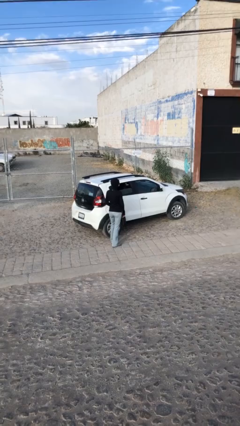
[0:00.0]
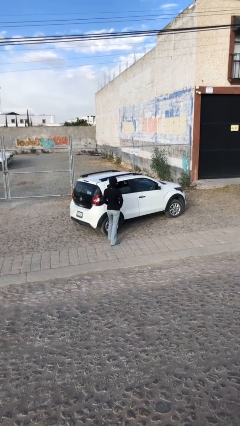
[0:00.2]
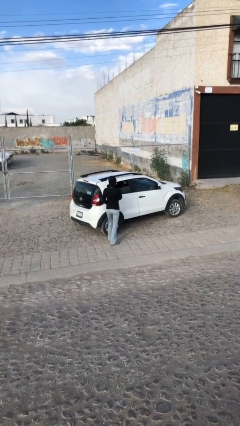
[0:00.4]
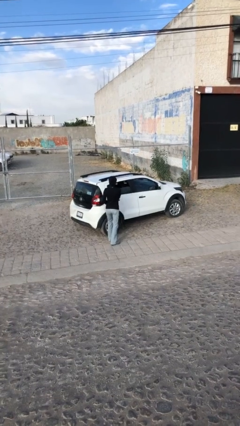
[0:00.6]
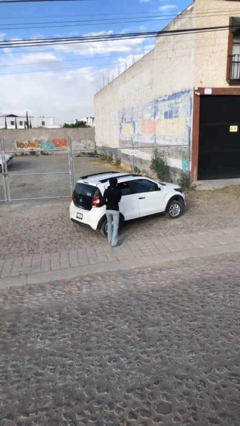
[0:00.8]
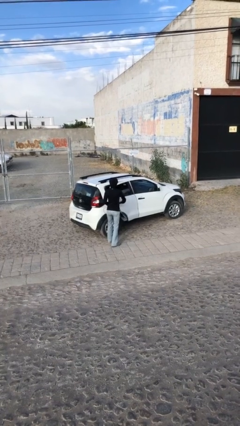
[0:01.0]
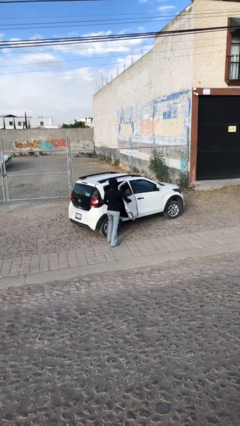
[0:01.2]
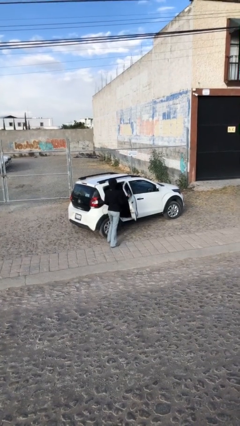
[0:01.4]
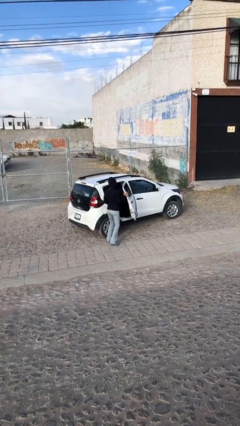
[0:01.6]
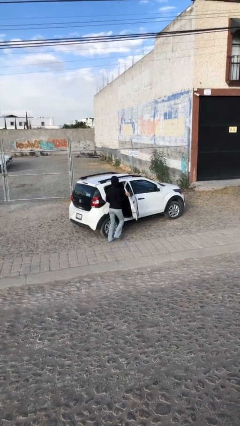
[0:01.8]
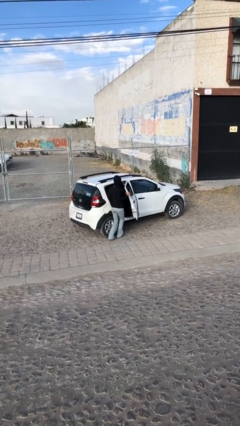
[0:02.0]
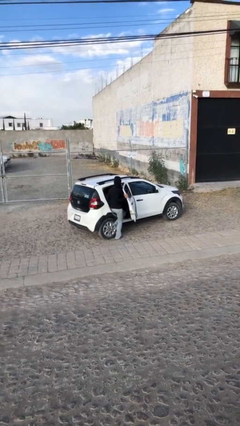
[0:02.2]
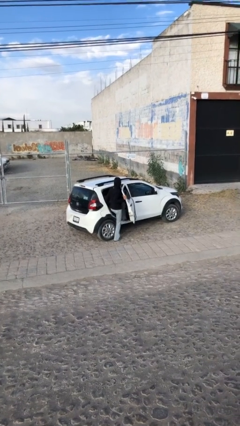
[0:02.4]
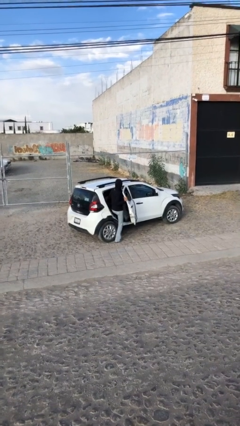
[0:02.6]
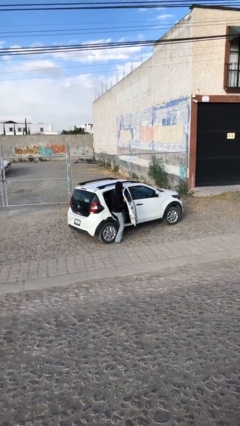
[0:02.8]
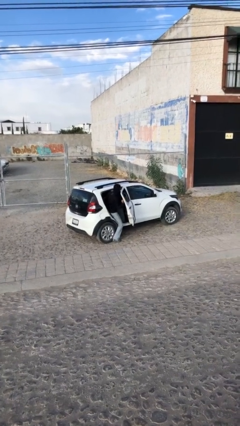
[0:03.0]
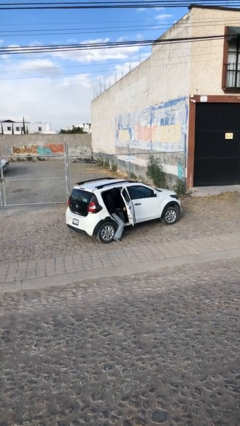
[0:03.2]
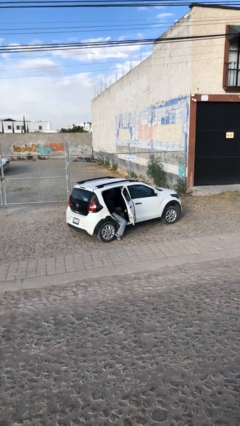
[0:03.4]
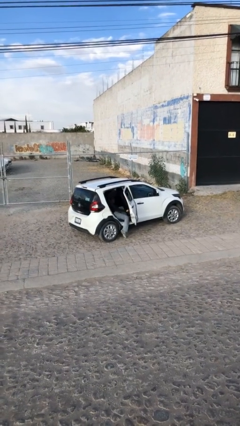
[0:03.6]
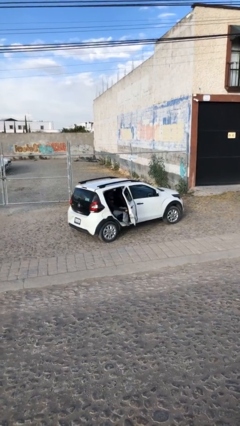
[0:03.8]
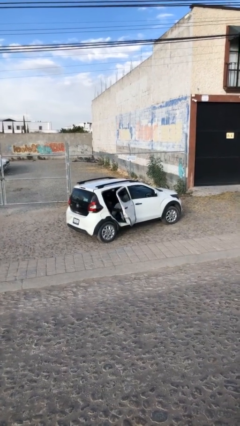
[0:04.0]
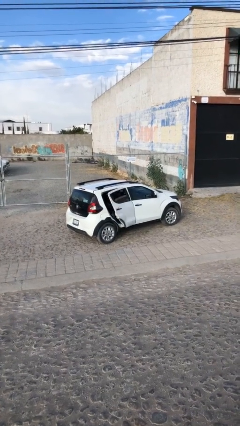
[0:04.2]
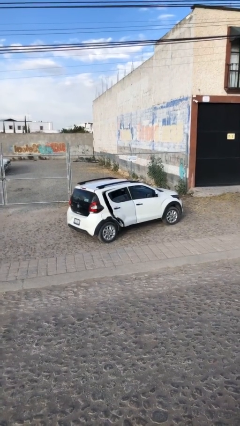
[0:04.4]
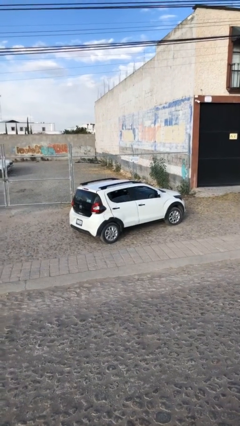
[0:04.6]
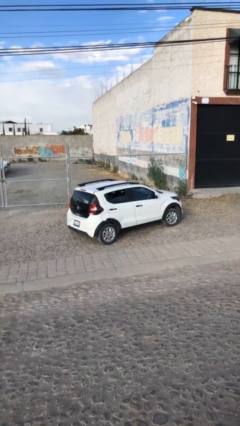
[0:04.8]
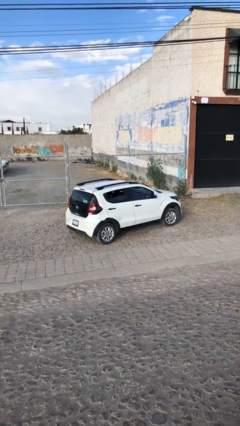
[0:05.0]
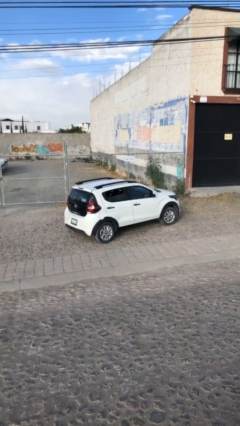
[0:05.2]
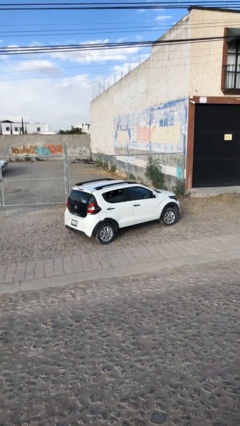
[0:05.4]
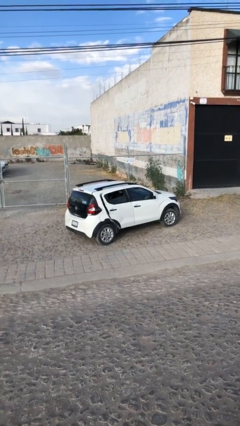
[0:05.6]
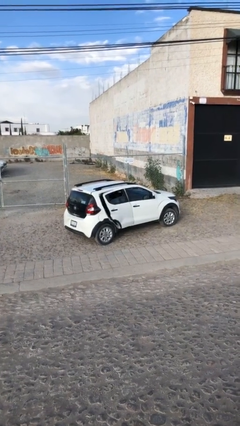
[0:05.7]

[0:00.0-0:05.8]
car picks up person

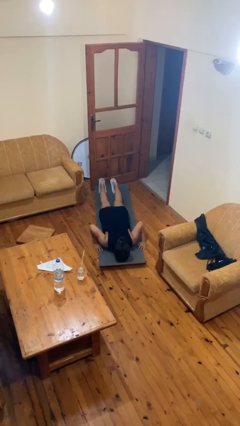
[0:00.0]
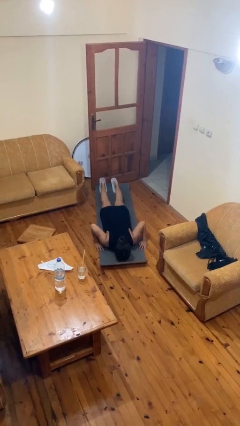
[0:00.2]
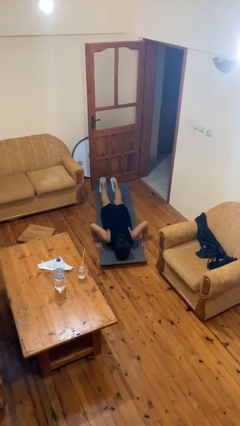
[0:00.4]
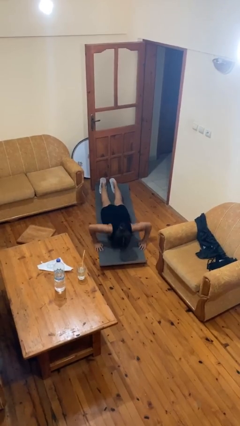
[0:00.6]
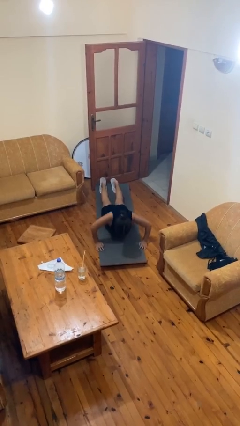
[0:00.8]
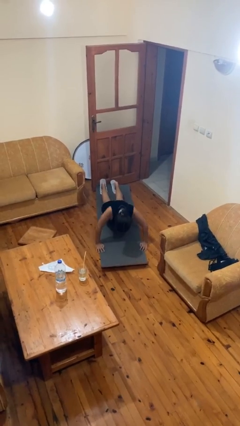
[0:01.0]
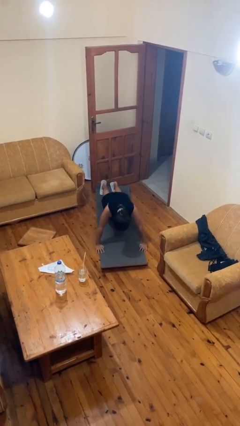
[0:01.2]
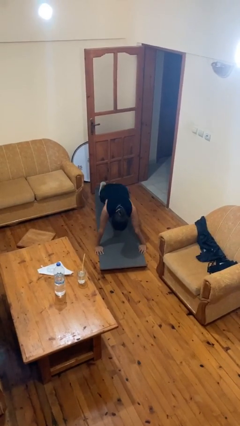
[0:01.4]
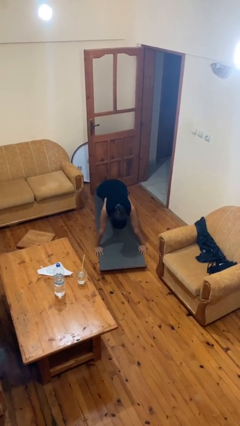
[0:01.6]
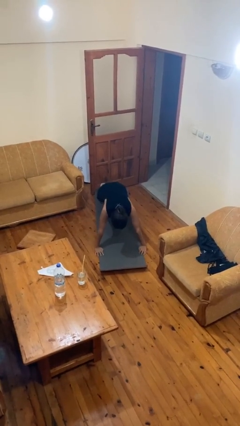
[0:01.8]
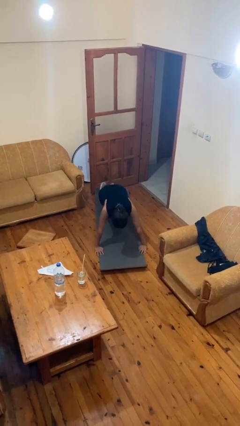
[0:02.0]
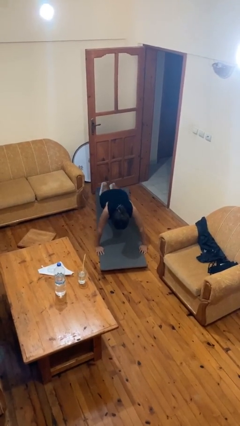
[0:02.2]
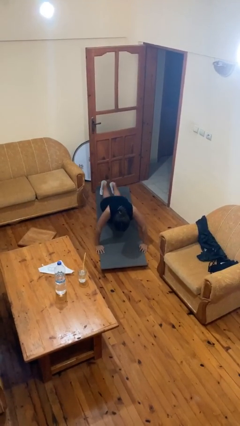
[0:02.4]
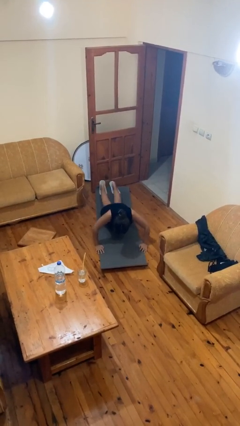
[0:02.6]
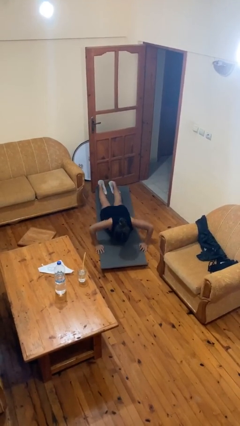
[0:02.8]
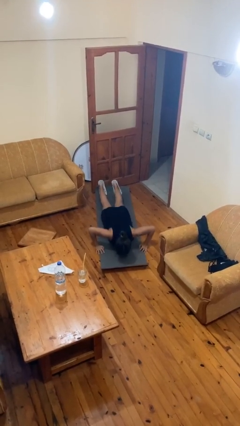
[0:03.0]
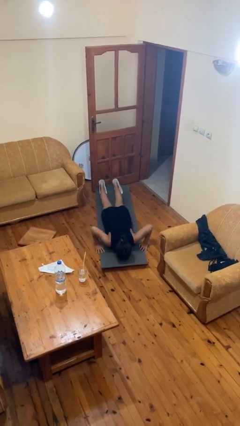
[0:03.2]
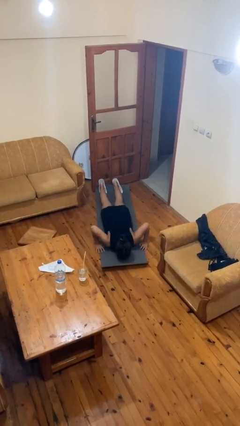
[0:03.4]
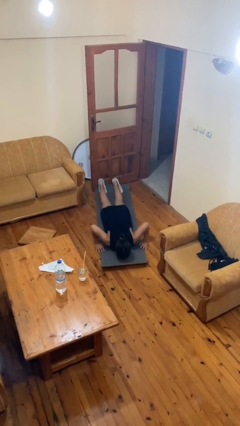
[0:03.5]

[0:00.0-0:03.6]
person exercises with pushup

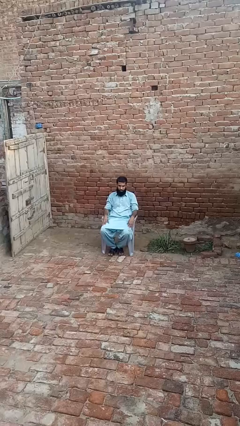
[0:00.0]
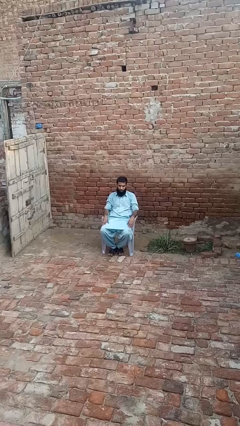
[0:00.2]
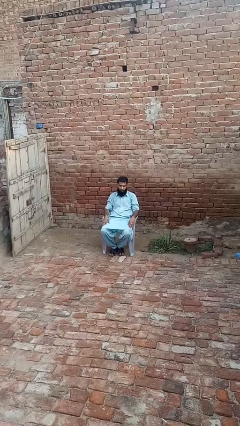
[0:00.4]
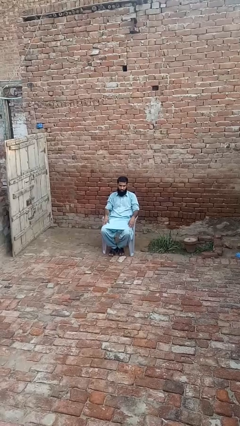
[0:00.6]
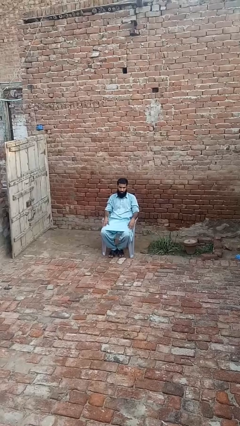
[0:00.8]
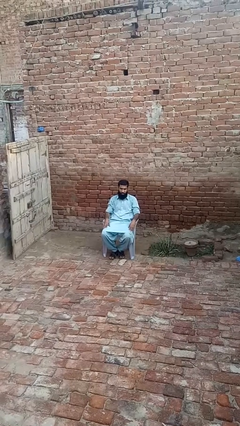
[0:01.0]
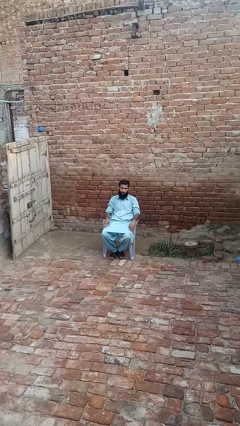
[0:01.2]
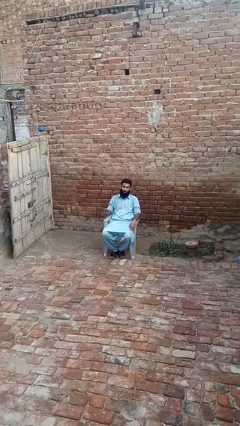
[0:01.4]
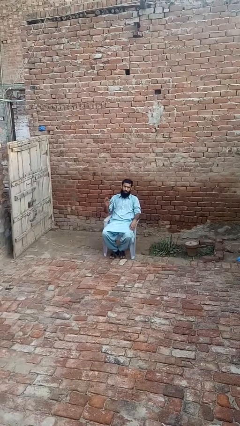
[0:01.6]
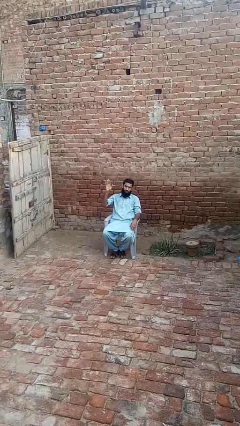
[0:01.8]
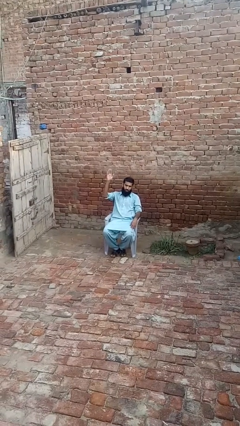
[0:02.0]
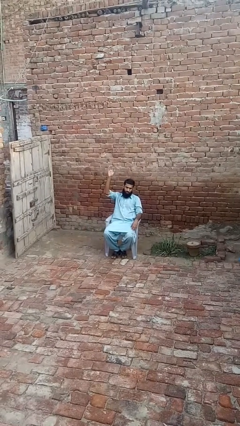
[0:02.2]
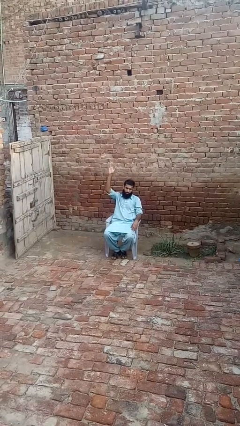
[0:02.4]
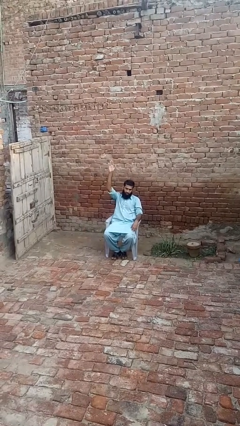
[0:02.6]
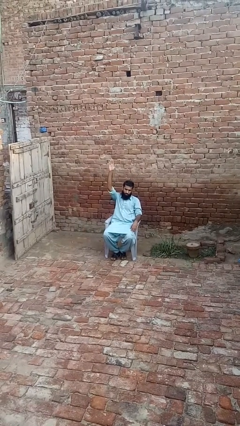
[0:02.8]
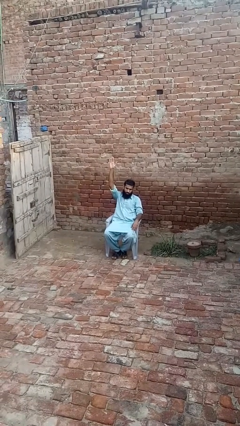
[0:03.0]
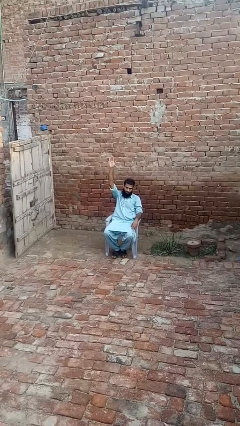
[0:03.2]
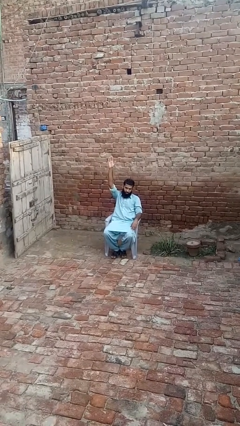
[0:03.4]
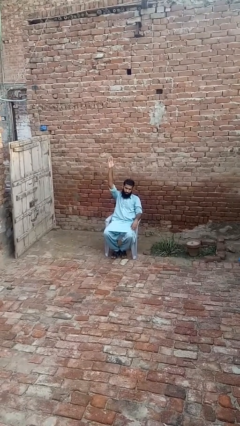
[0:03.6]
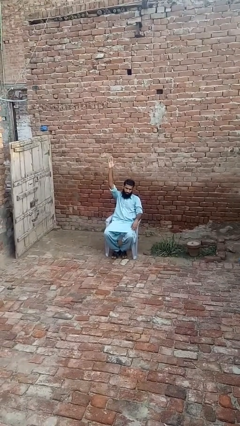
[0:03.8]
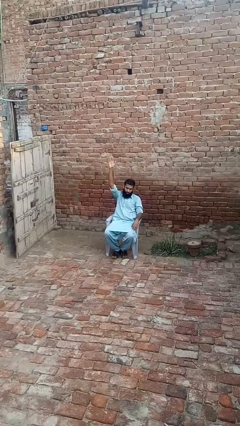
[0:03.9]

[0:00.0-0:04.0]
person gestures raise hand

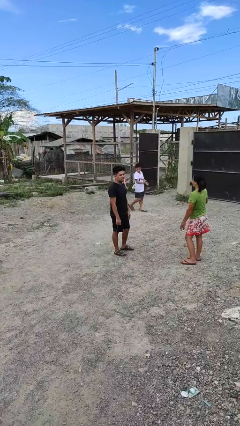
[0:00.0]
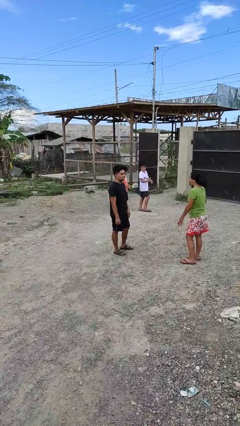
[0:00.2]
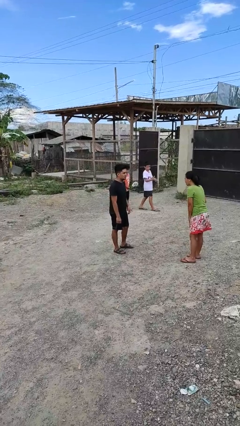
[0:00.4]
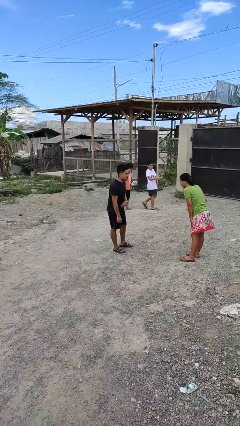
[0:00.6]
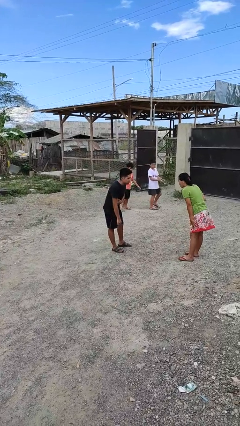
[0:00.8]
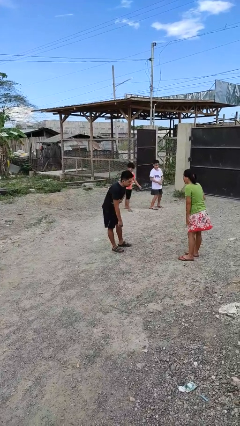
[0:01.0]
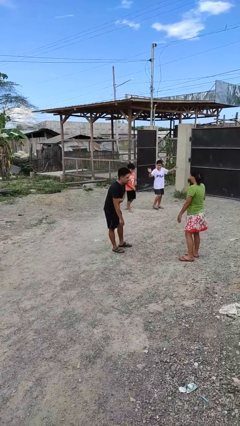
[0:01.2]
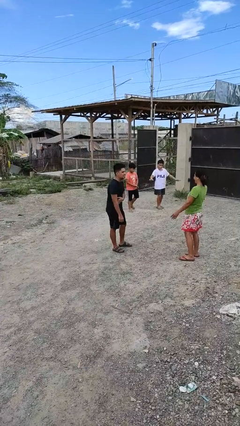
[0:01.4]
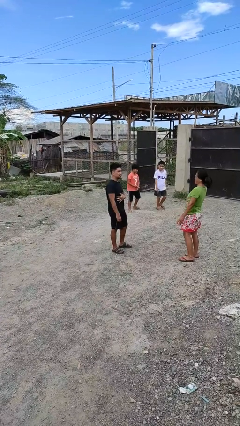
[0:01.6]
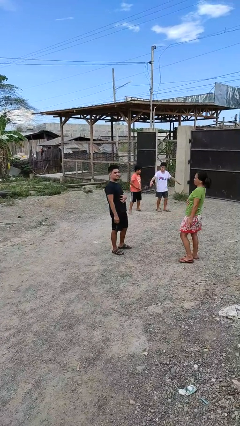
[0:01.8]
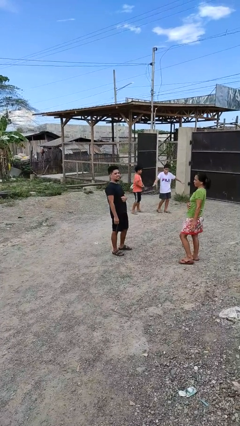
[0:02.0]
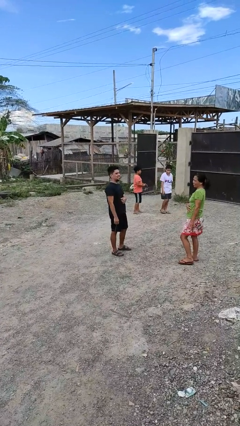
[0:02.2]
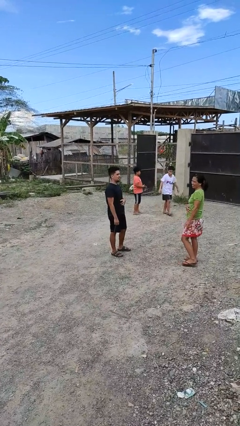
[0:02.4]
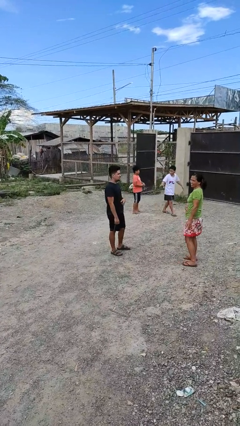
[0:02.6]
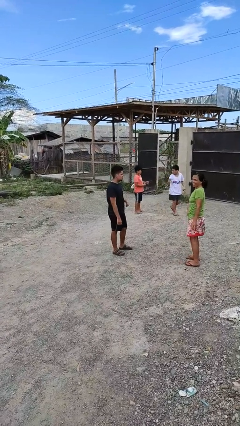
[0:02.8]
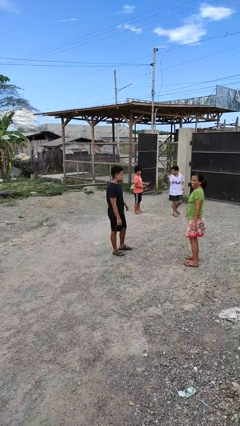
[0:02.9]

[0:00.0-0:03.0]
person laughs with person

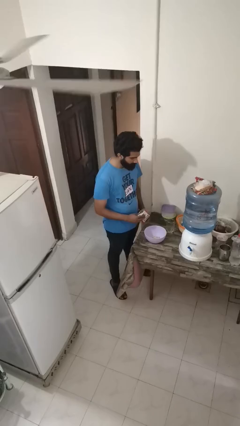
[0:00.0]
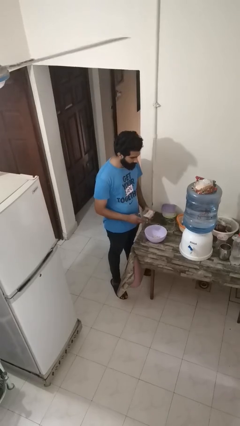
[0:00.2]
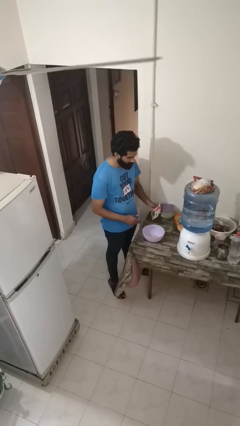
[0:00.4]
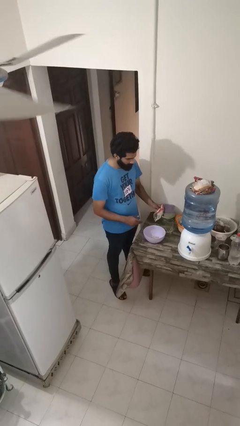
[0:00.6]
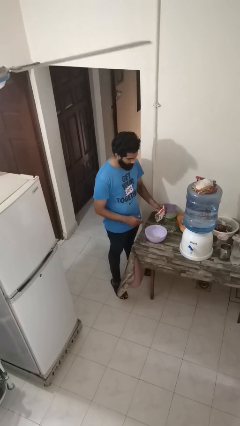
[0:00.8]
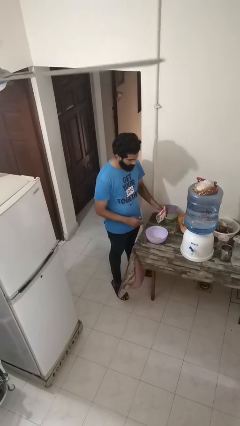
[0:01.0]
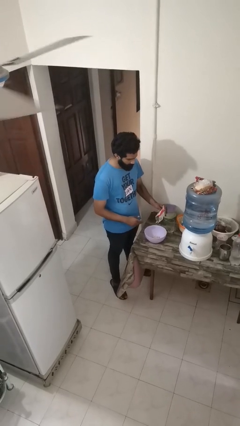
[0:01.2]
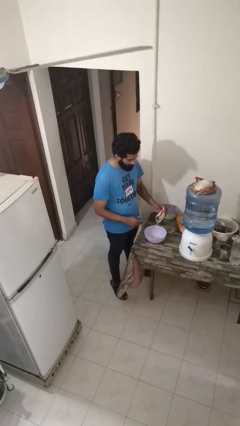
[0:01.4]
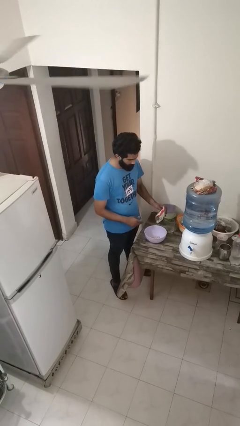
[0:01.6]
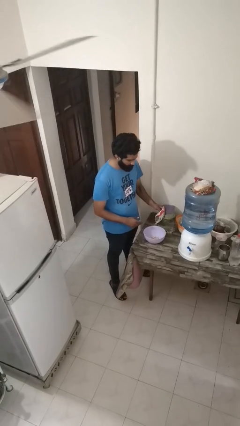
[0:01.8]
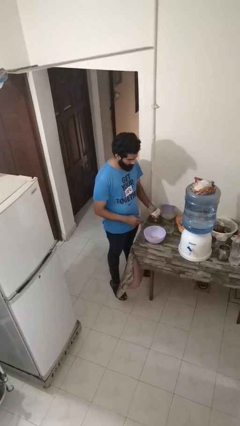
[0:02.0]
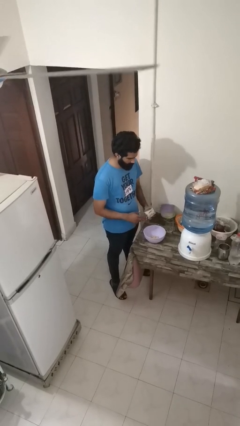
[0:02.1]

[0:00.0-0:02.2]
person pours into bowl
